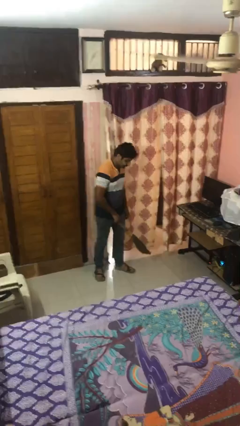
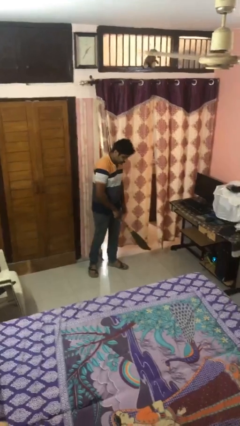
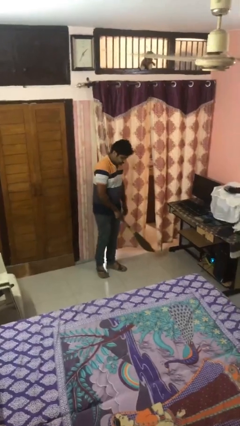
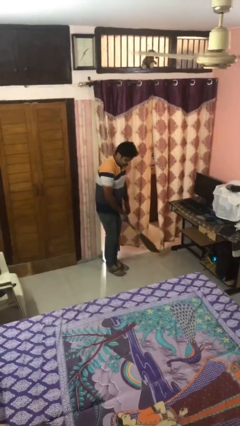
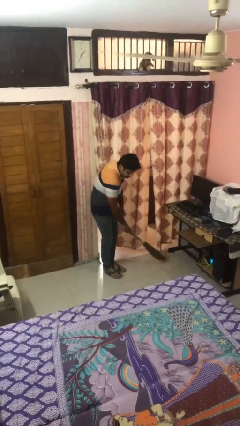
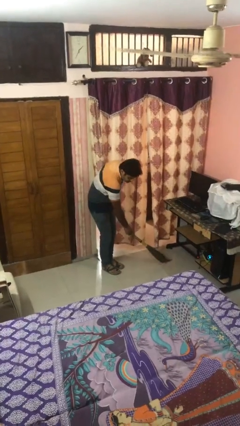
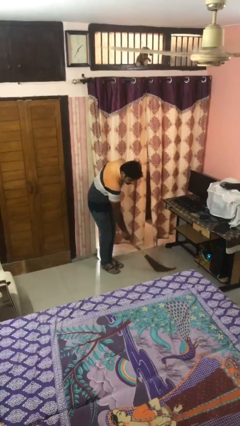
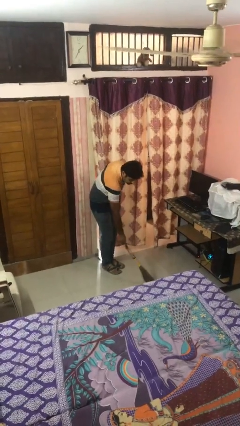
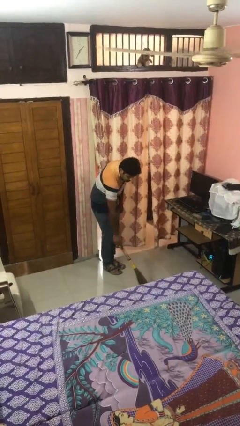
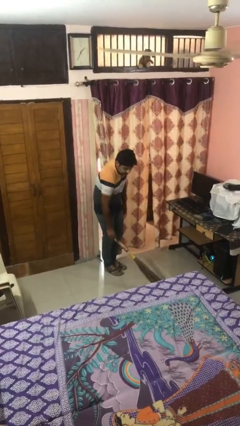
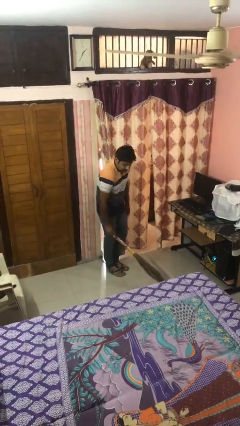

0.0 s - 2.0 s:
person sweeps floor

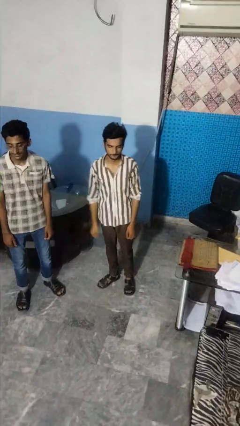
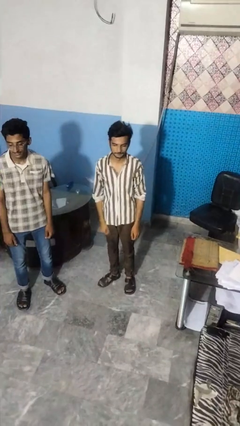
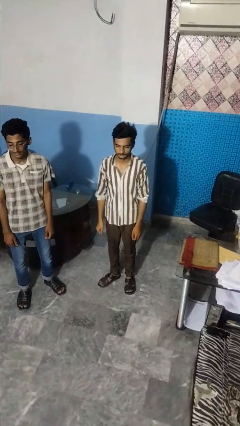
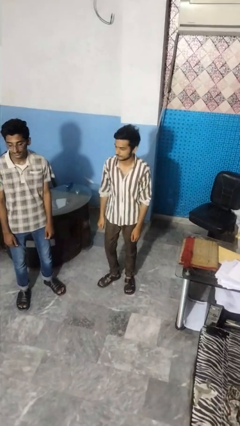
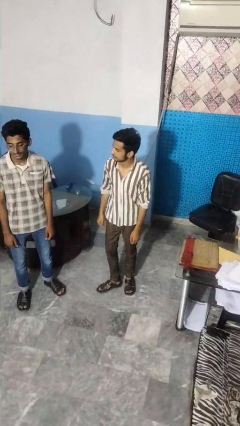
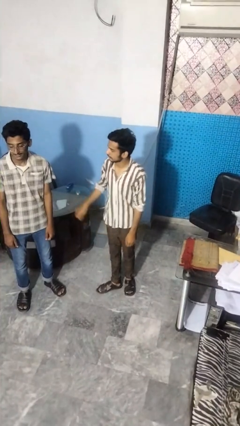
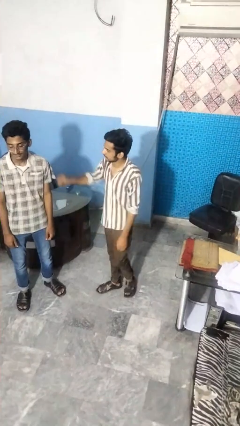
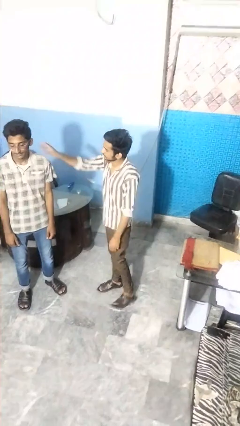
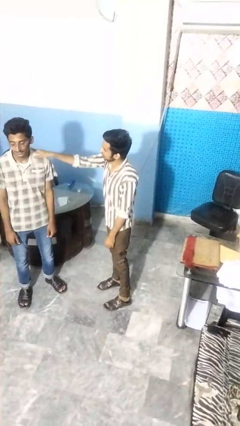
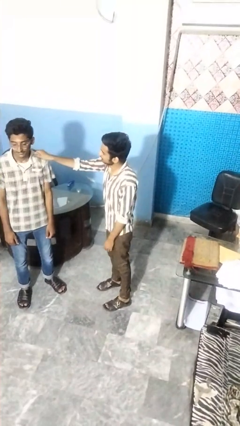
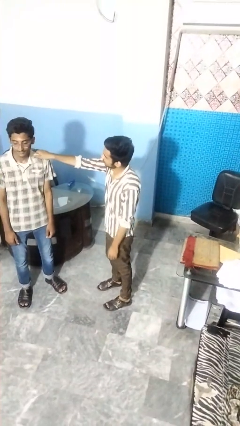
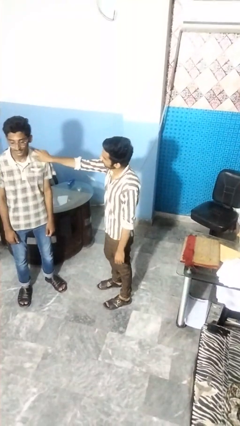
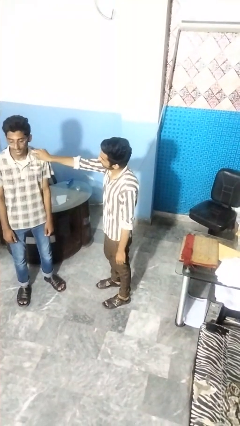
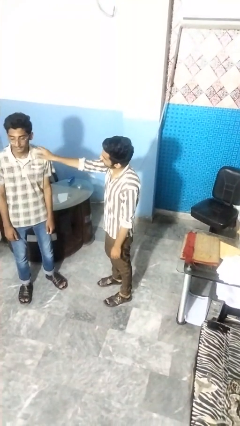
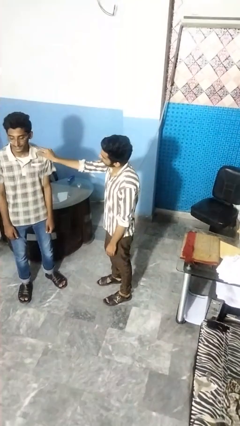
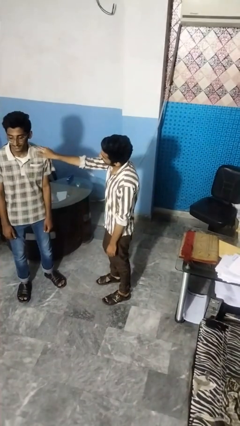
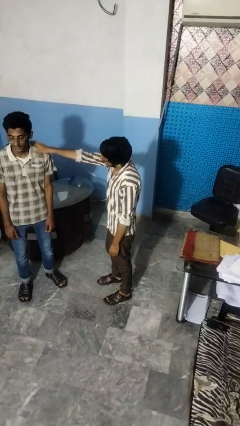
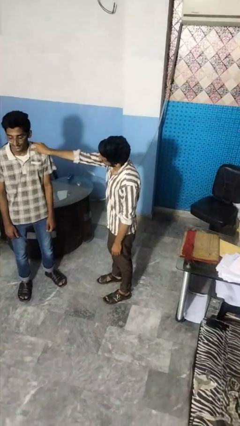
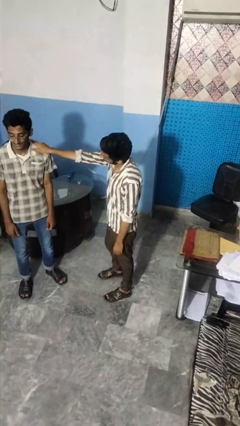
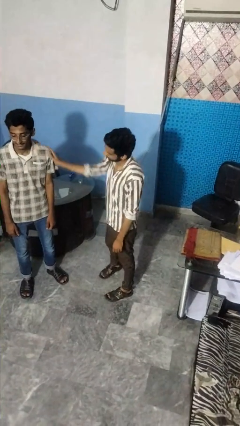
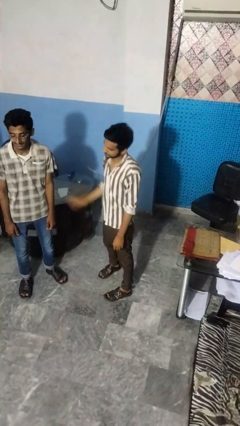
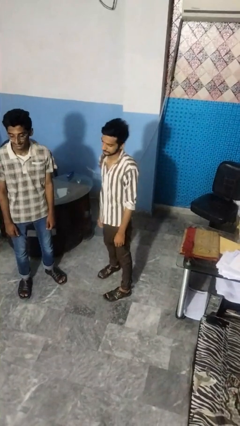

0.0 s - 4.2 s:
person pounds shoulders of person

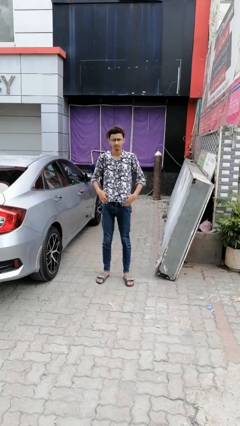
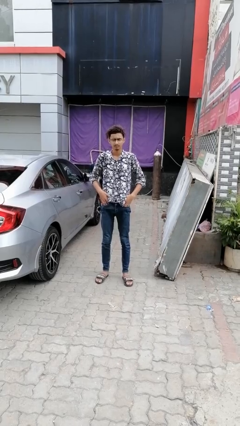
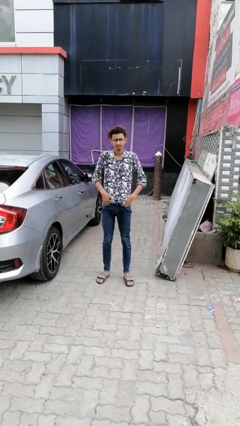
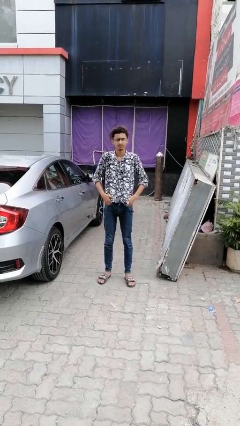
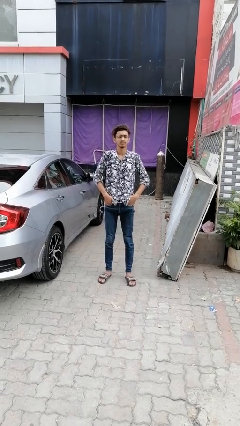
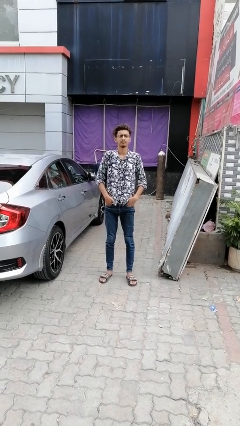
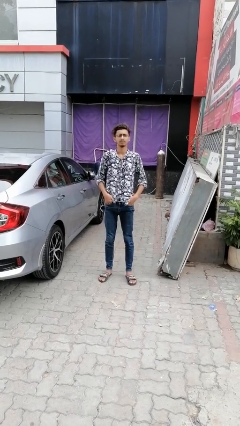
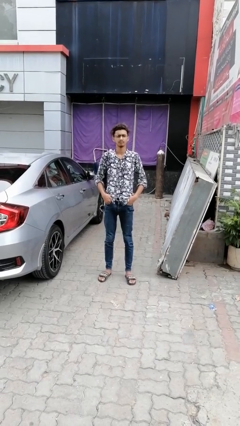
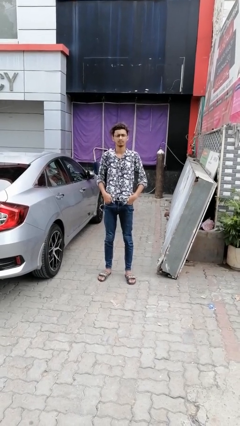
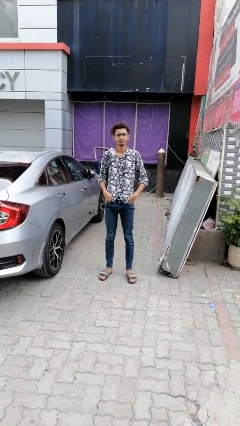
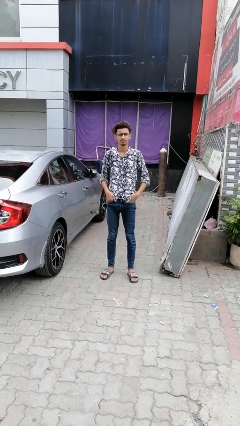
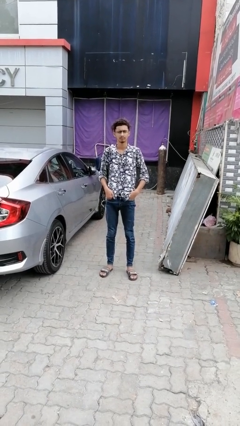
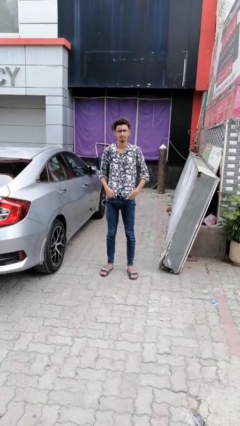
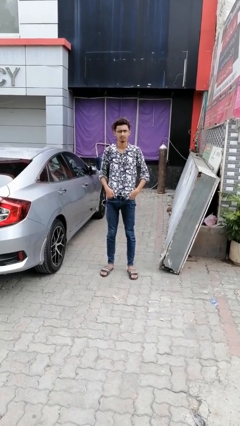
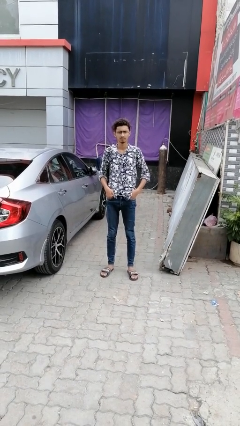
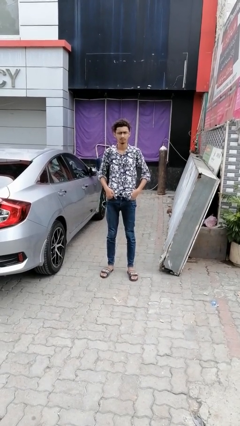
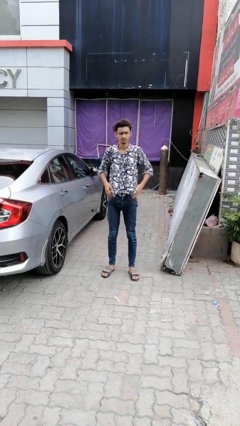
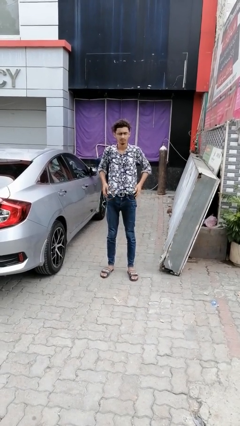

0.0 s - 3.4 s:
person puts hands in back pockets

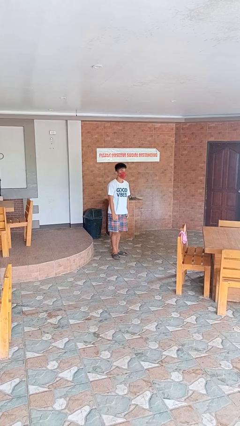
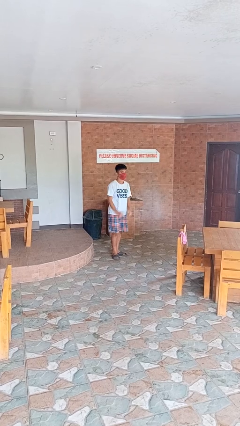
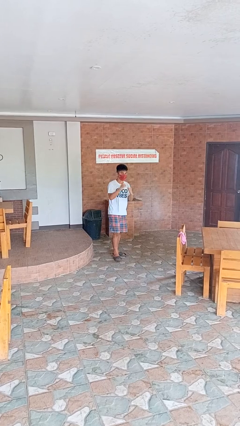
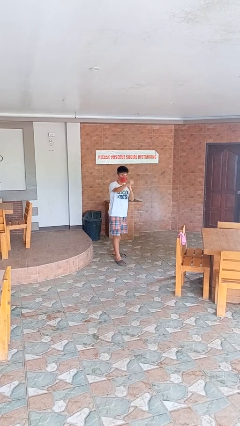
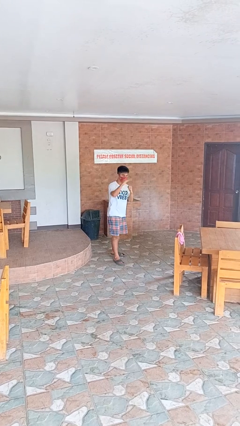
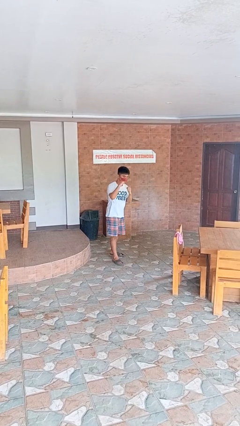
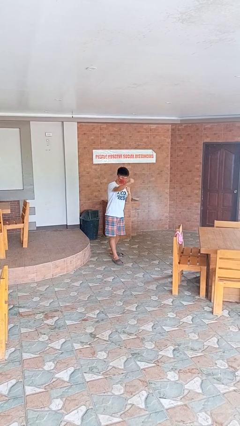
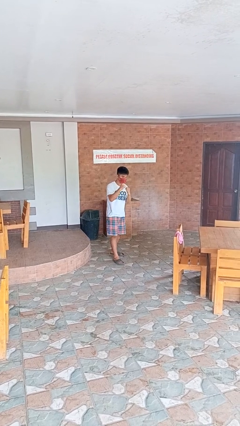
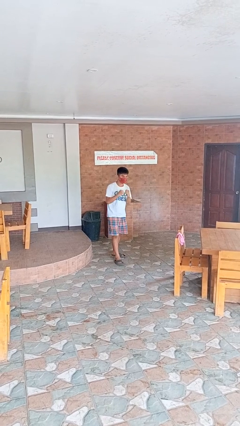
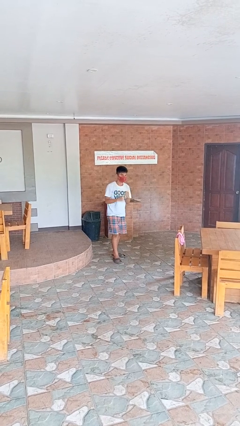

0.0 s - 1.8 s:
person punches

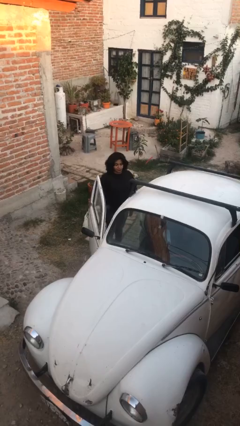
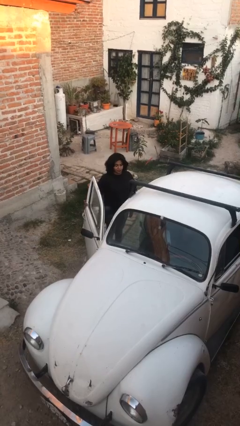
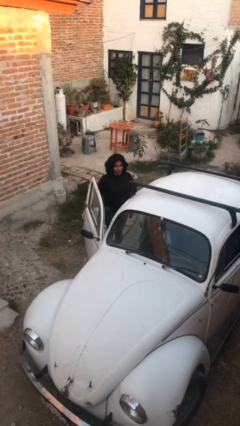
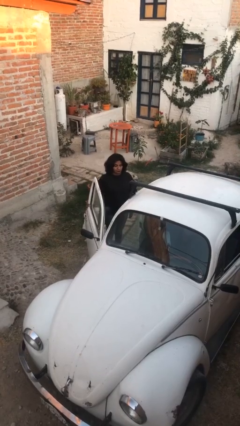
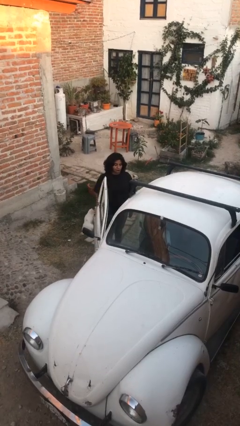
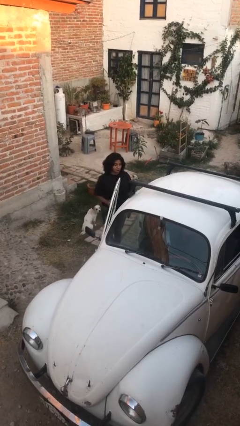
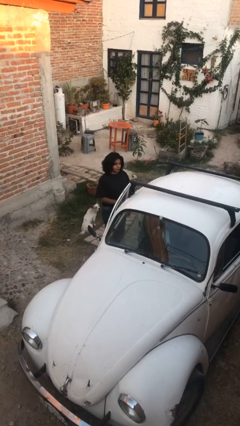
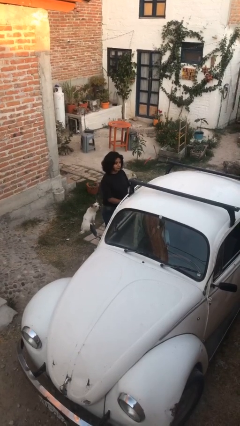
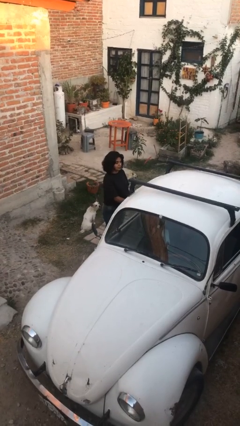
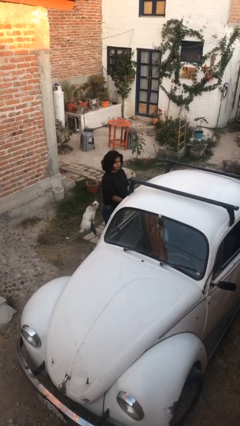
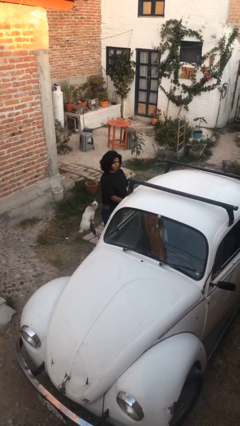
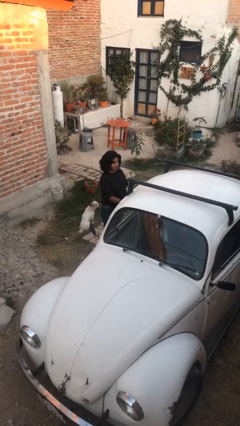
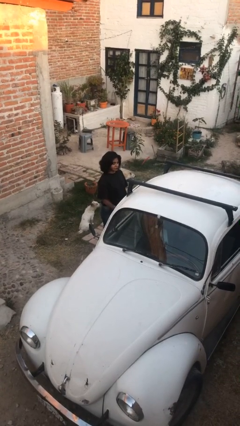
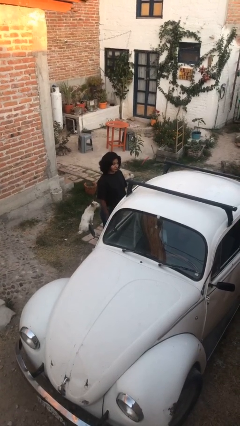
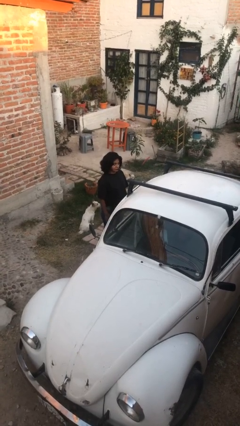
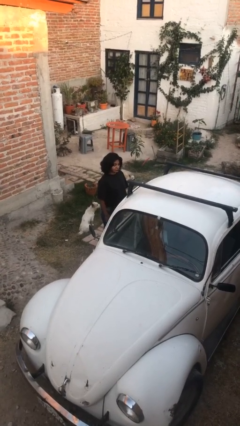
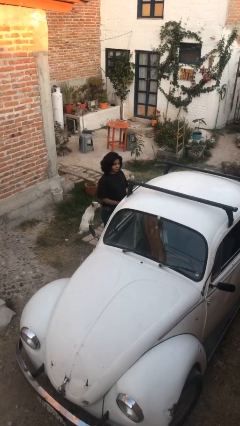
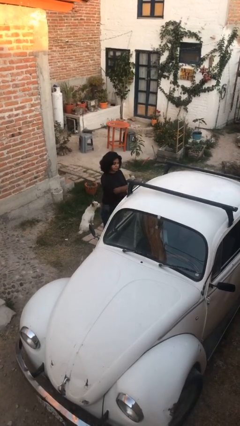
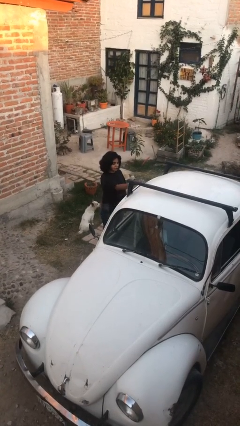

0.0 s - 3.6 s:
person closes car door

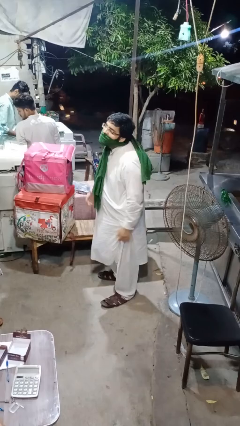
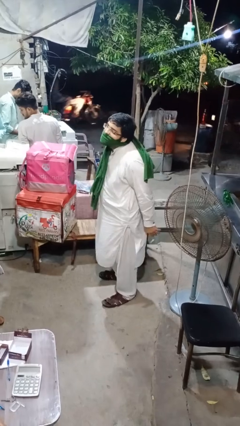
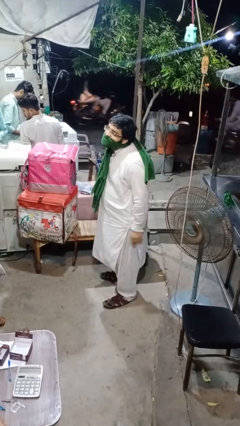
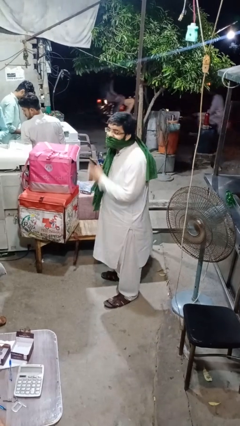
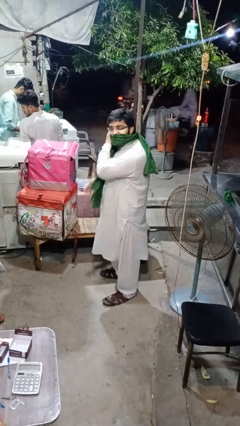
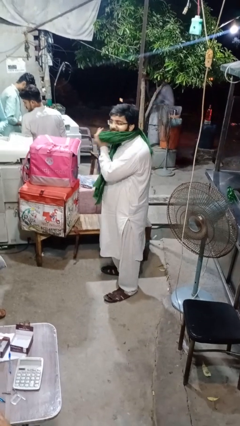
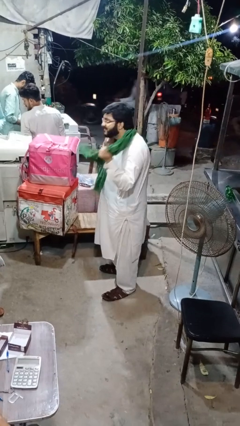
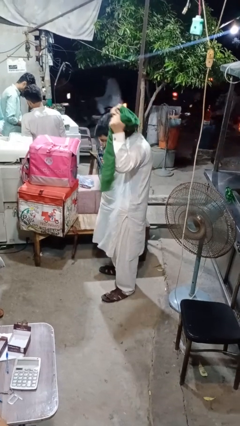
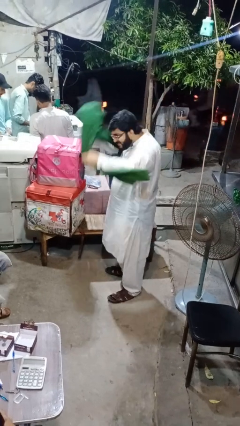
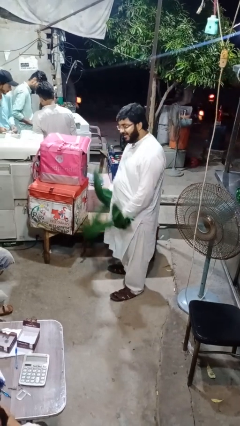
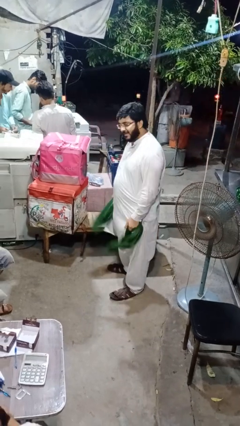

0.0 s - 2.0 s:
person takes off scarf
